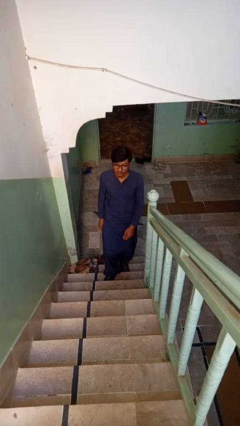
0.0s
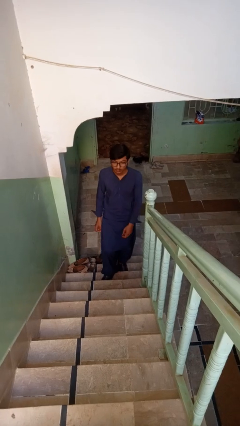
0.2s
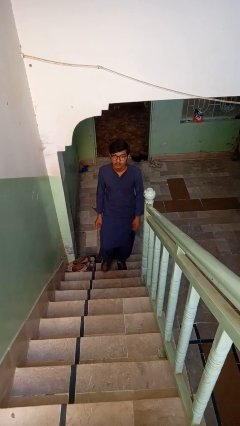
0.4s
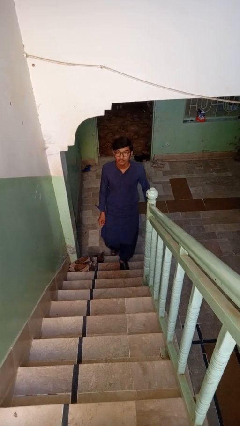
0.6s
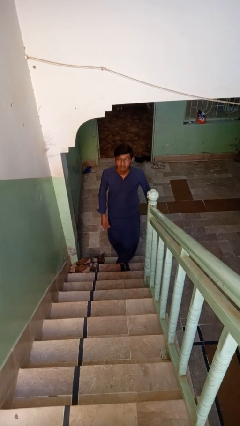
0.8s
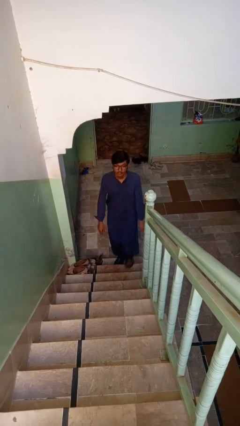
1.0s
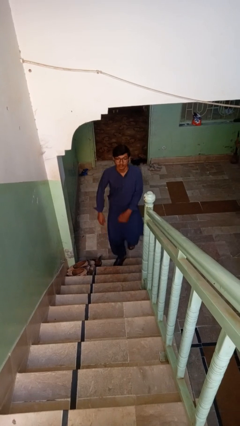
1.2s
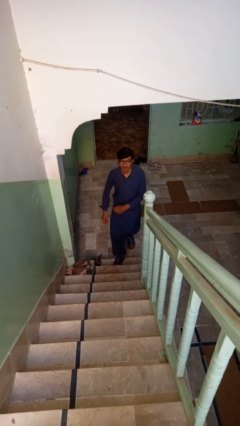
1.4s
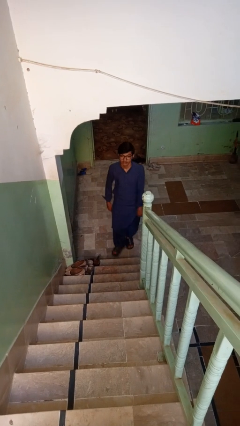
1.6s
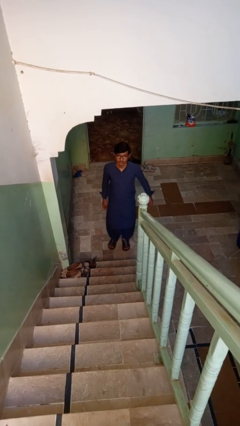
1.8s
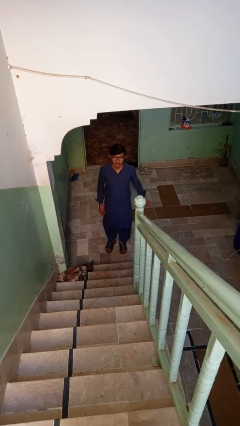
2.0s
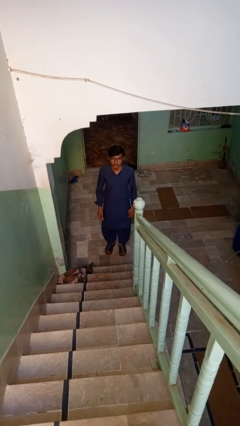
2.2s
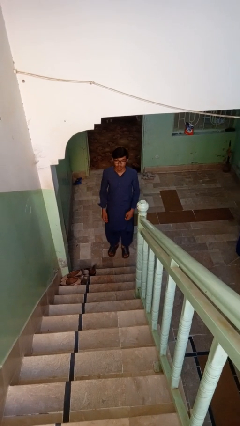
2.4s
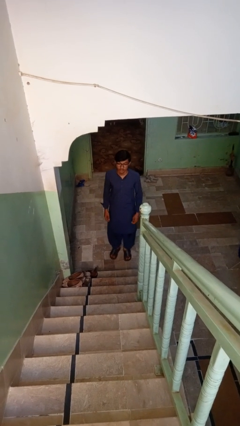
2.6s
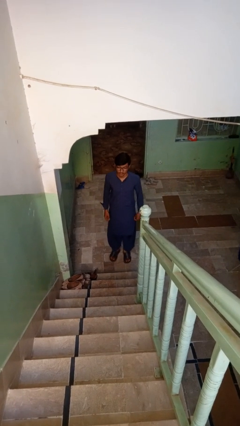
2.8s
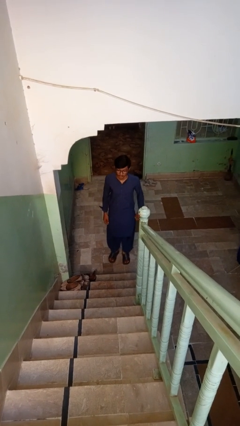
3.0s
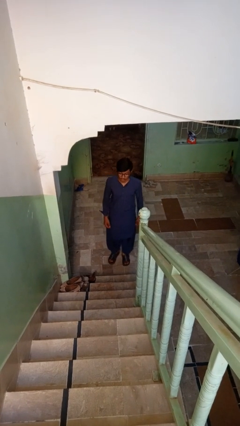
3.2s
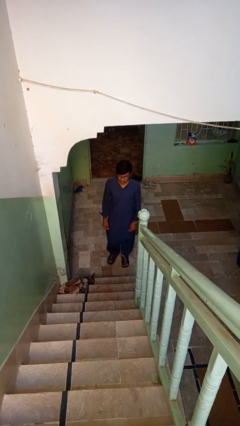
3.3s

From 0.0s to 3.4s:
person climbs down stairs

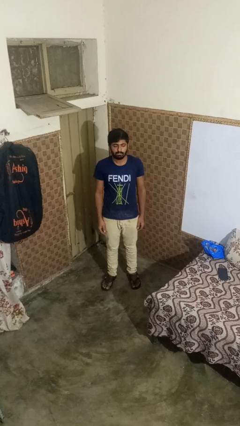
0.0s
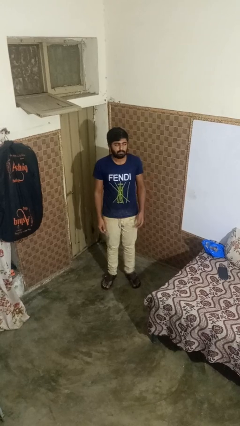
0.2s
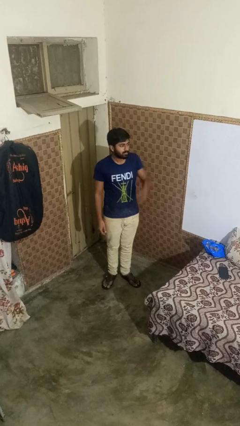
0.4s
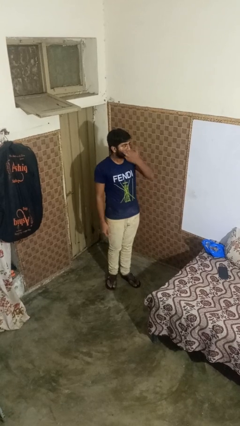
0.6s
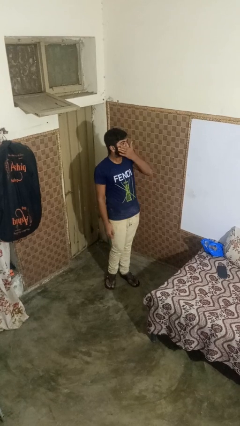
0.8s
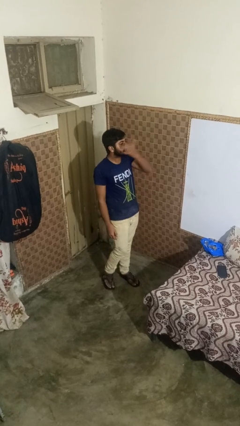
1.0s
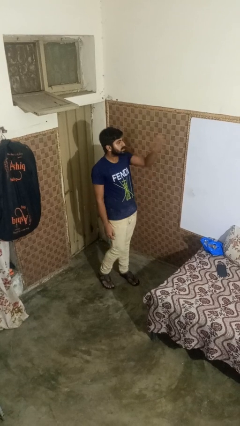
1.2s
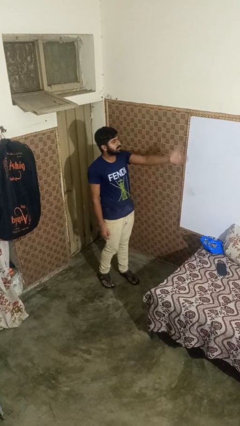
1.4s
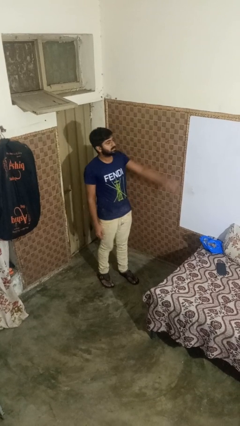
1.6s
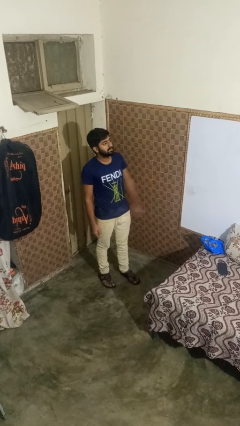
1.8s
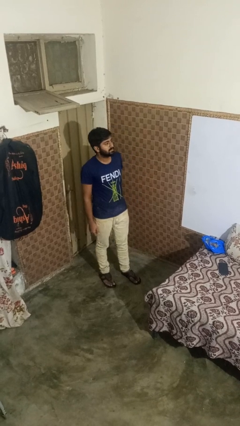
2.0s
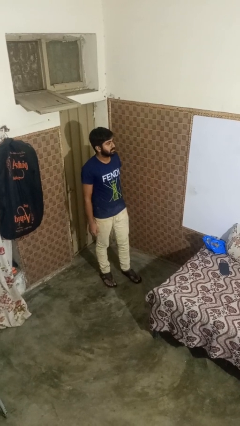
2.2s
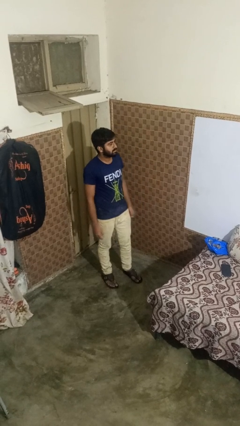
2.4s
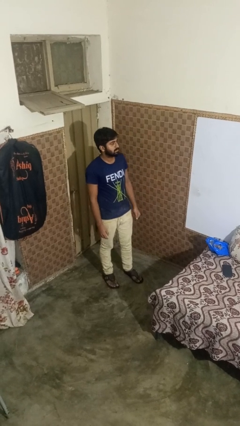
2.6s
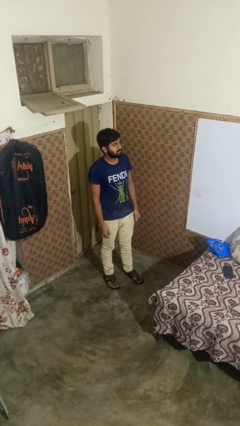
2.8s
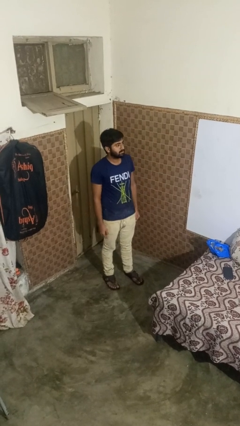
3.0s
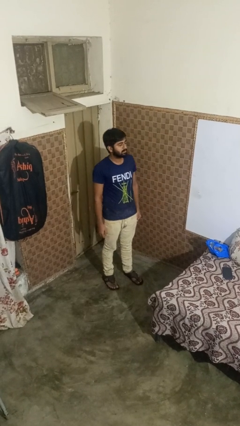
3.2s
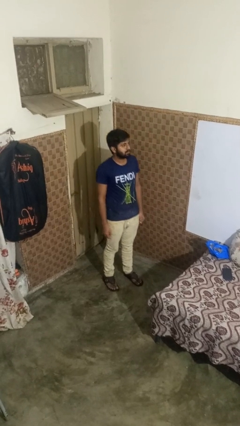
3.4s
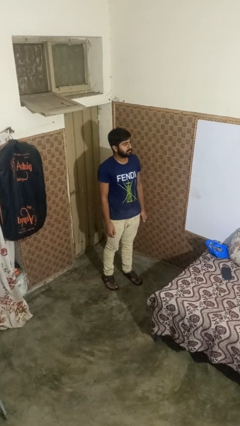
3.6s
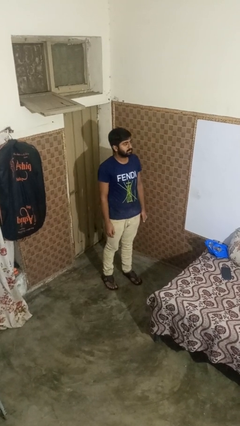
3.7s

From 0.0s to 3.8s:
person gestures blow kiss

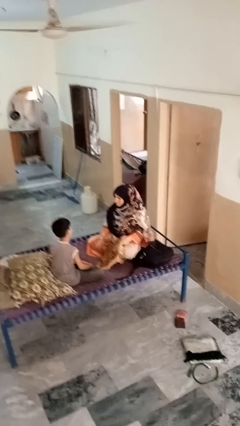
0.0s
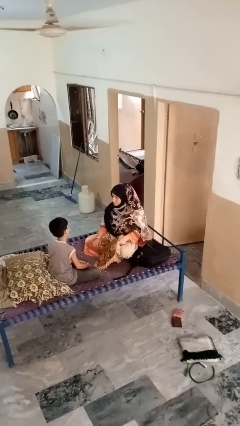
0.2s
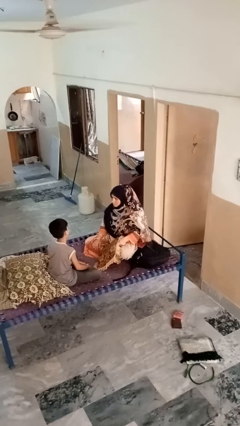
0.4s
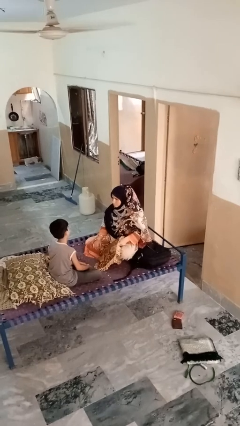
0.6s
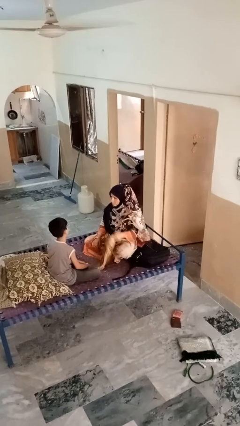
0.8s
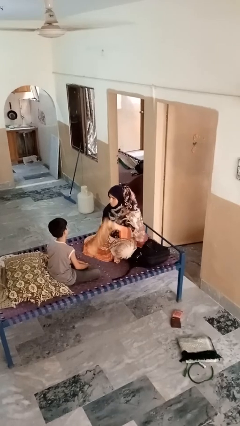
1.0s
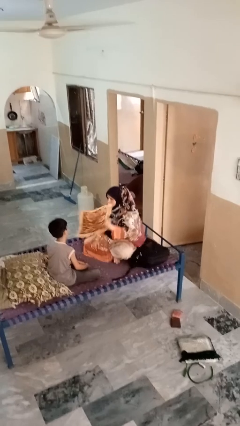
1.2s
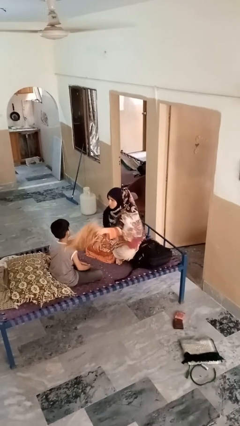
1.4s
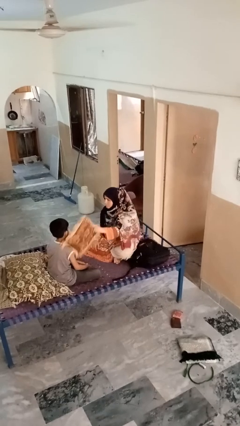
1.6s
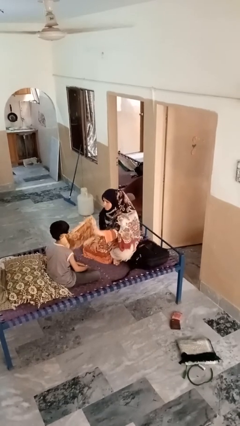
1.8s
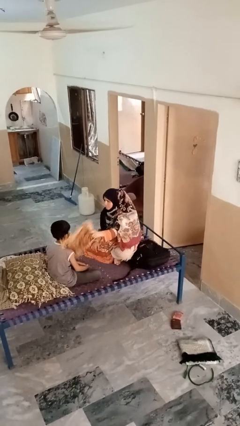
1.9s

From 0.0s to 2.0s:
person hits person with pillow

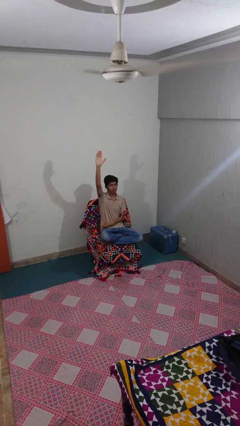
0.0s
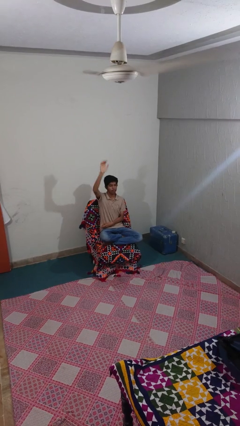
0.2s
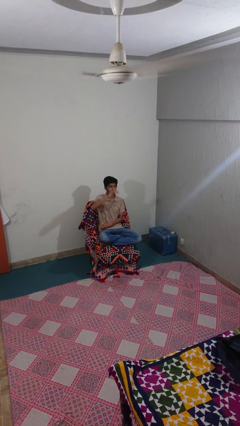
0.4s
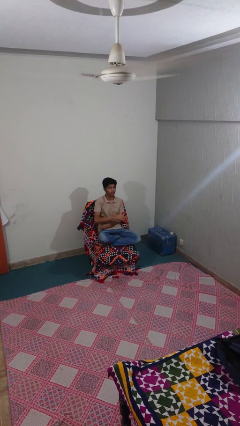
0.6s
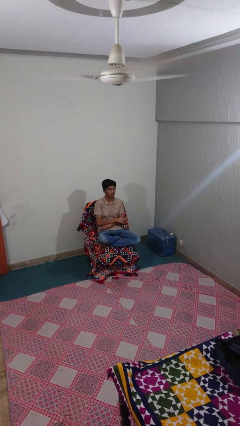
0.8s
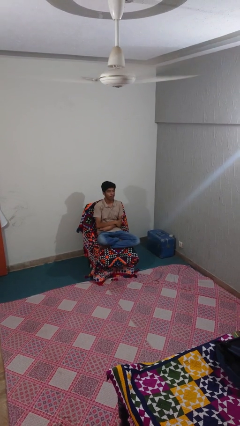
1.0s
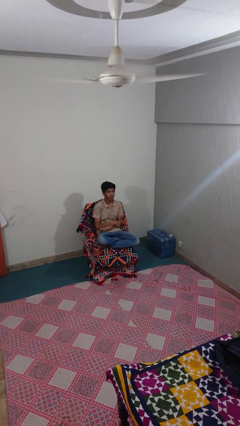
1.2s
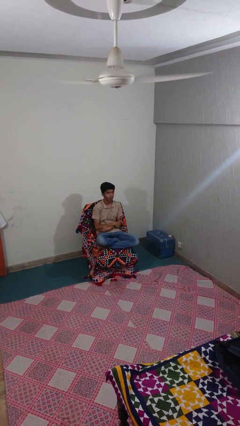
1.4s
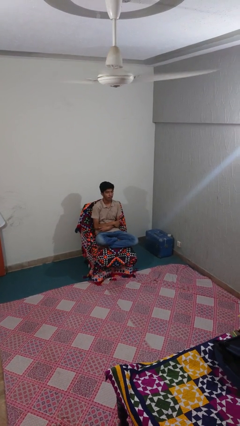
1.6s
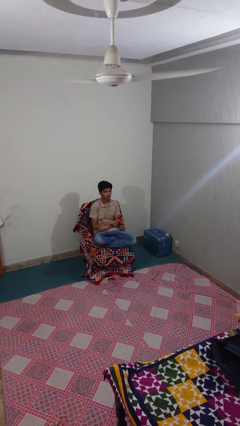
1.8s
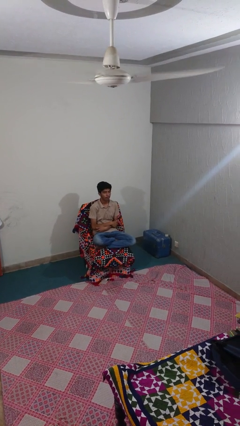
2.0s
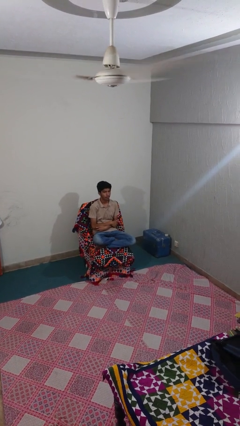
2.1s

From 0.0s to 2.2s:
person gestures lower hand

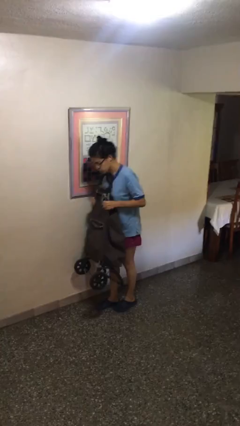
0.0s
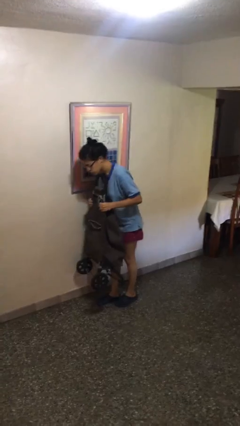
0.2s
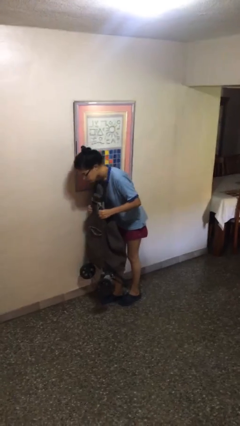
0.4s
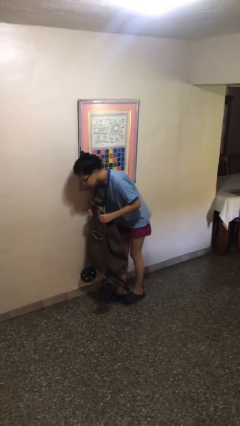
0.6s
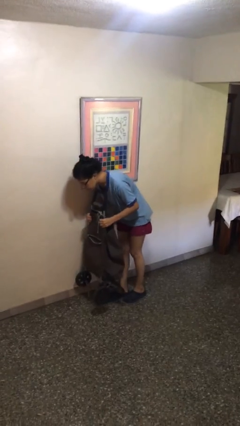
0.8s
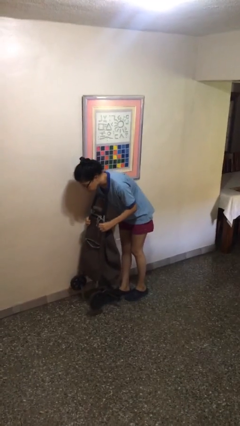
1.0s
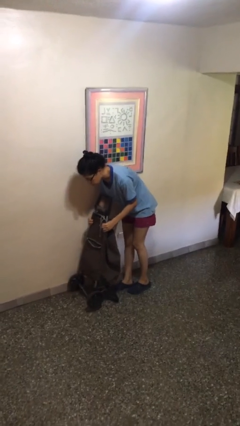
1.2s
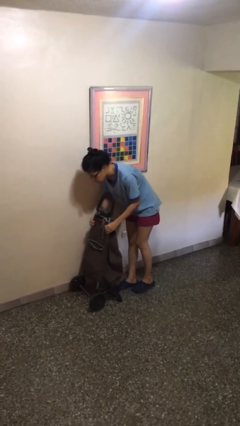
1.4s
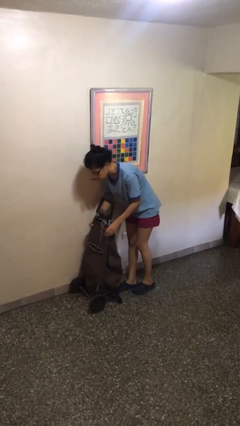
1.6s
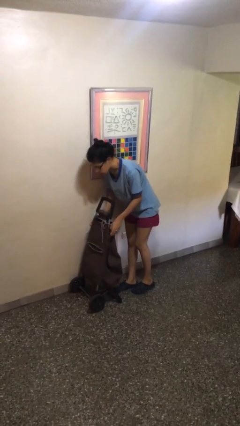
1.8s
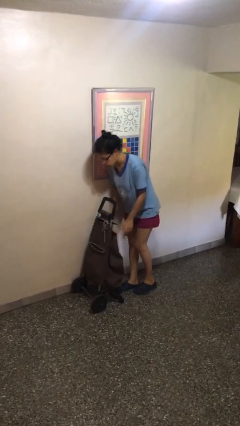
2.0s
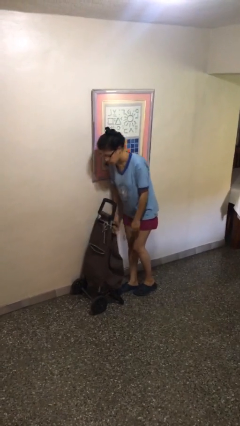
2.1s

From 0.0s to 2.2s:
person puts down object on floor

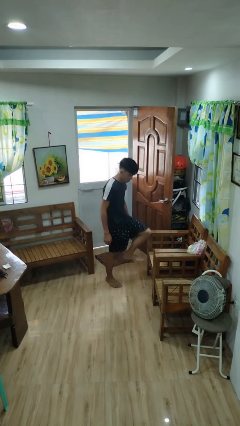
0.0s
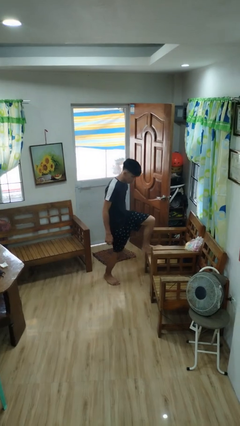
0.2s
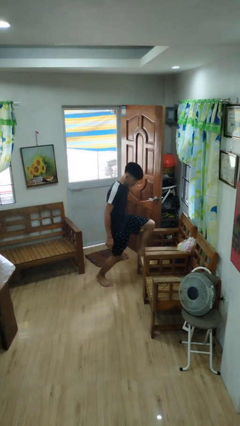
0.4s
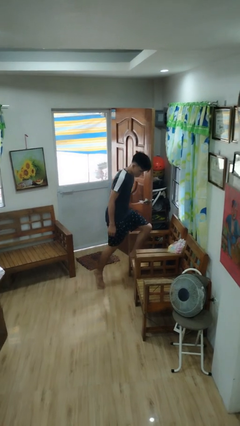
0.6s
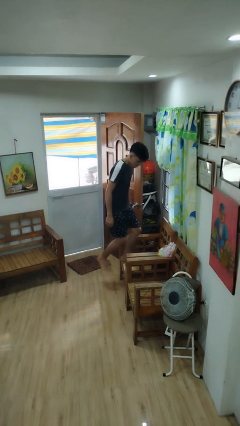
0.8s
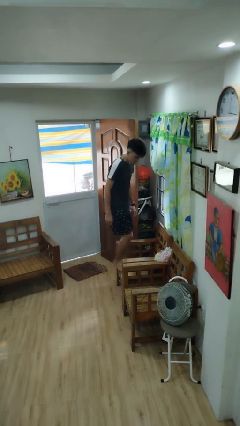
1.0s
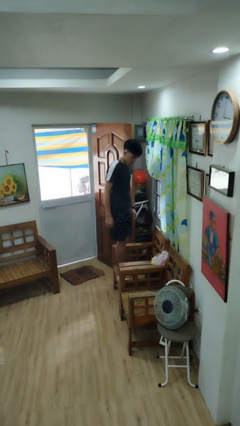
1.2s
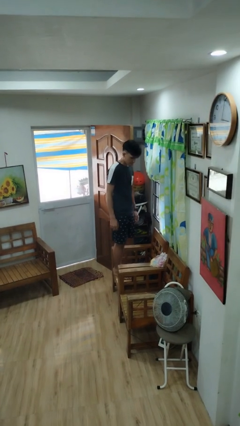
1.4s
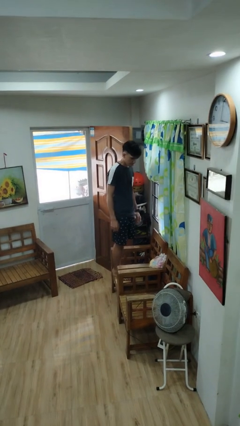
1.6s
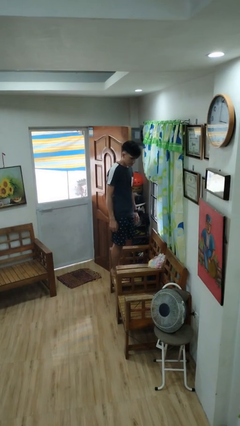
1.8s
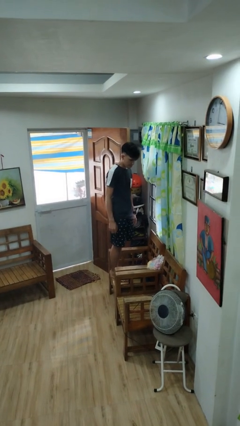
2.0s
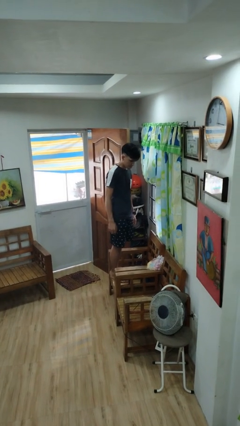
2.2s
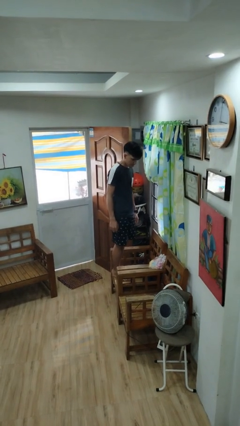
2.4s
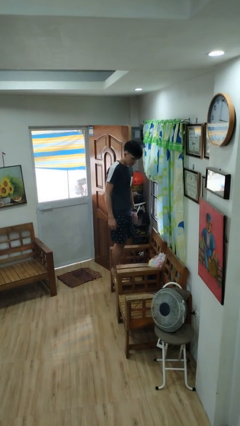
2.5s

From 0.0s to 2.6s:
person climbs on chair

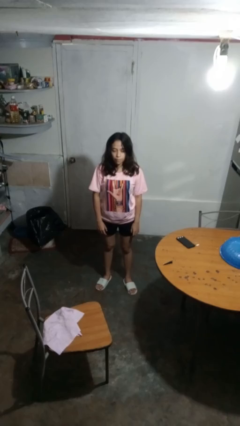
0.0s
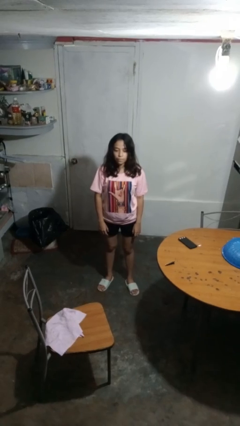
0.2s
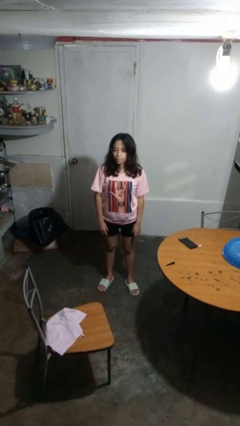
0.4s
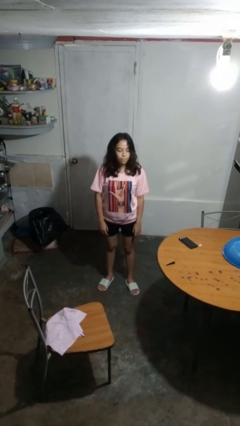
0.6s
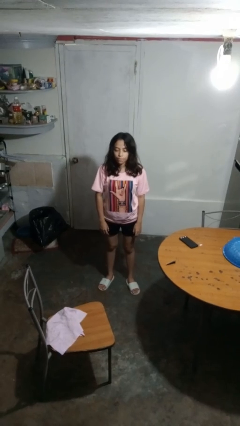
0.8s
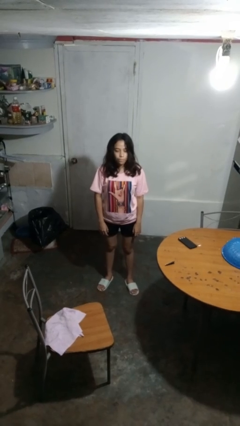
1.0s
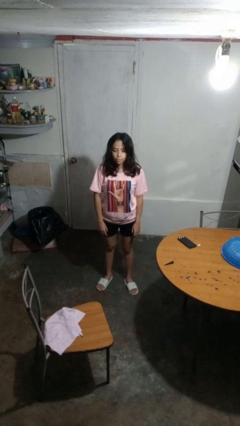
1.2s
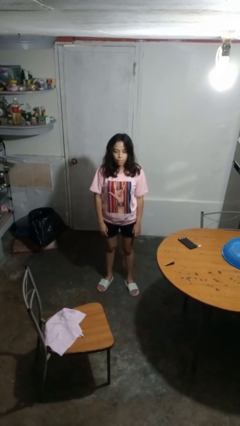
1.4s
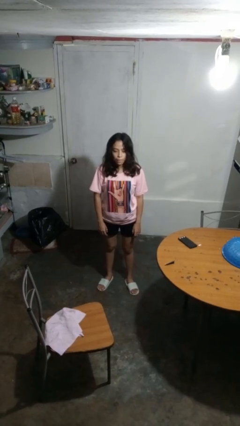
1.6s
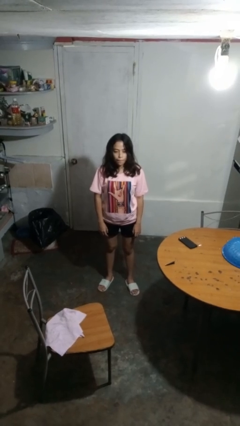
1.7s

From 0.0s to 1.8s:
person shakes head
